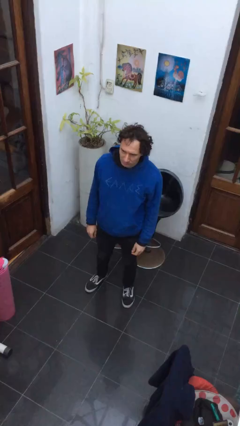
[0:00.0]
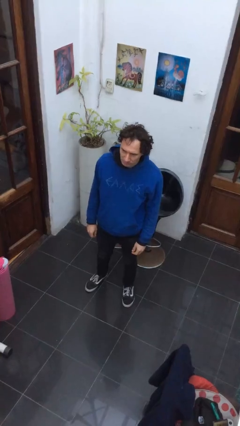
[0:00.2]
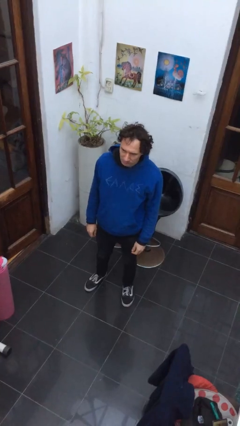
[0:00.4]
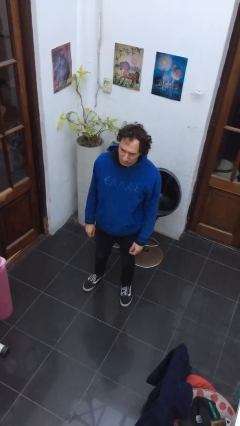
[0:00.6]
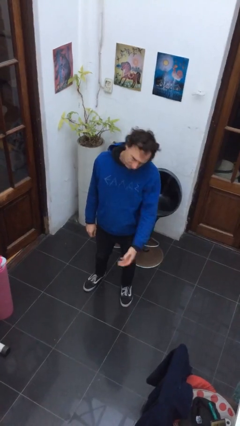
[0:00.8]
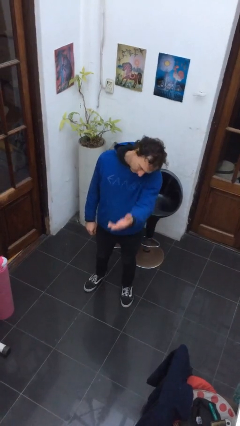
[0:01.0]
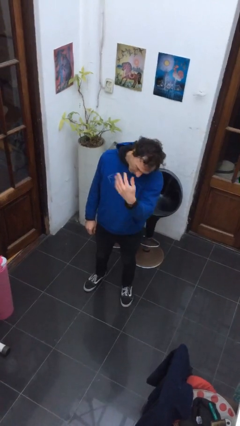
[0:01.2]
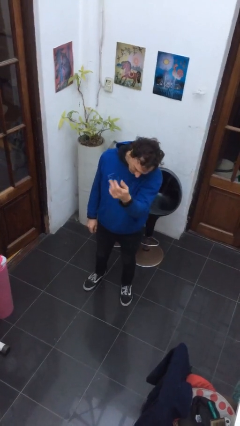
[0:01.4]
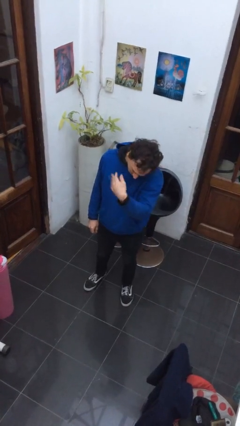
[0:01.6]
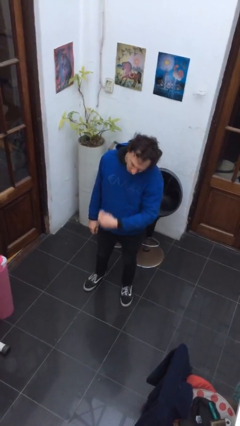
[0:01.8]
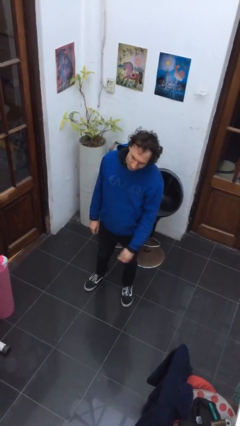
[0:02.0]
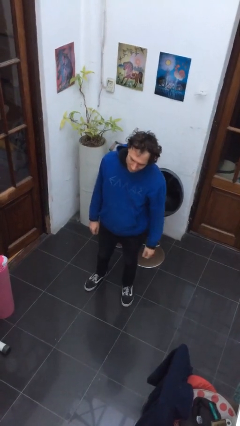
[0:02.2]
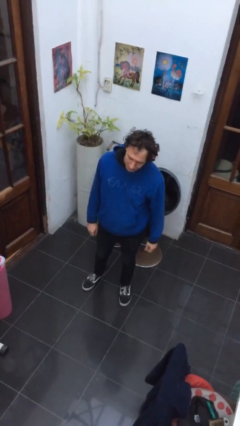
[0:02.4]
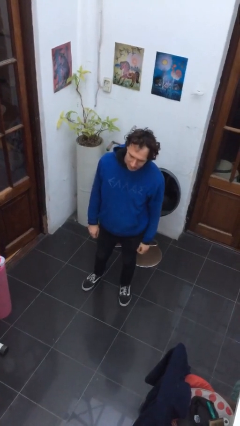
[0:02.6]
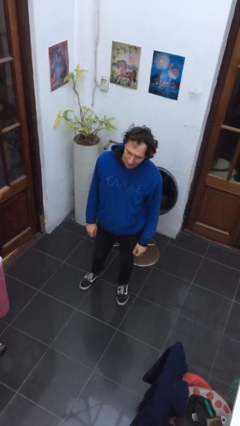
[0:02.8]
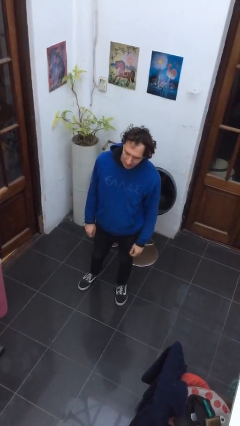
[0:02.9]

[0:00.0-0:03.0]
person gestures come here

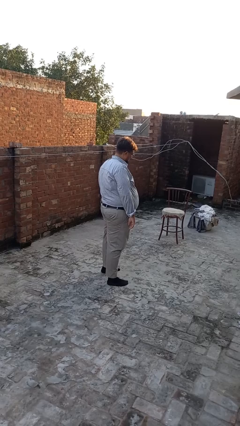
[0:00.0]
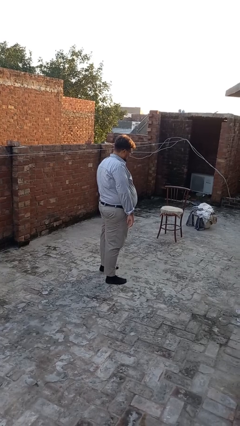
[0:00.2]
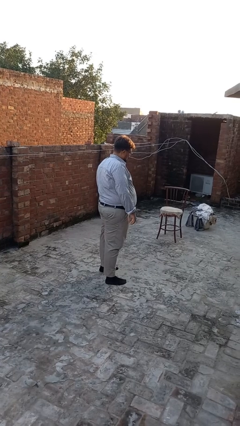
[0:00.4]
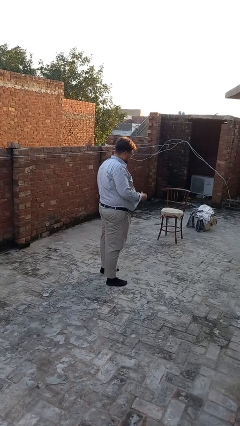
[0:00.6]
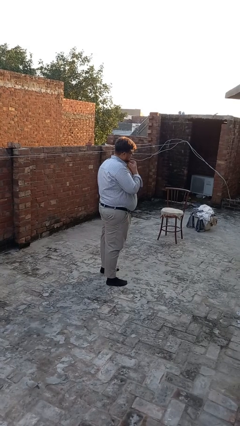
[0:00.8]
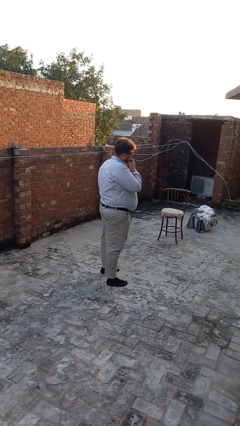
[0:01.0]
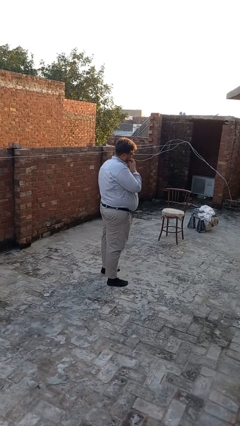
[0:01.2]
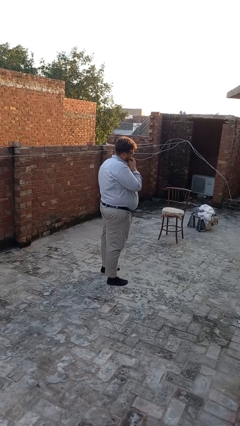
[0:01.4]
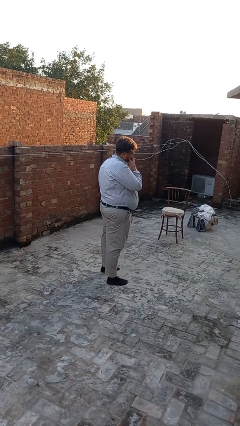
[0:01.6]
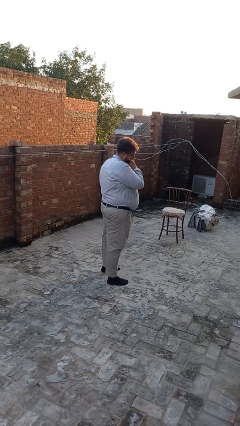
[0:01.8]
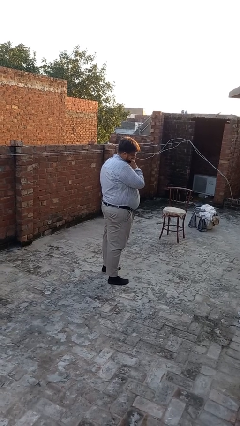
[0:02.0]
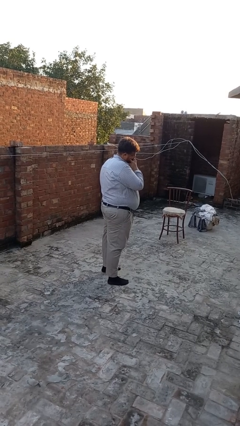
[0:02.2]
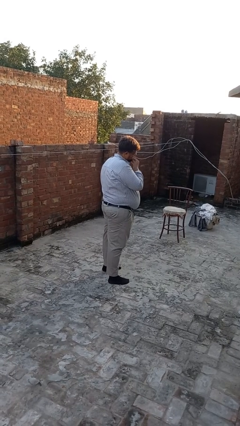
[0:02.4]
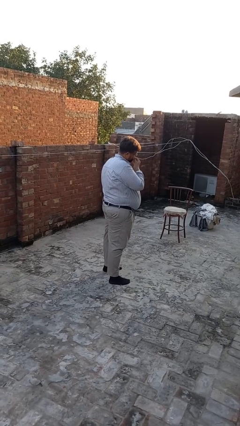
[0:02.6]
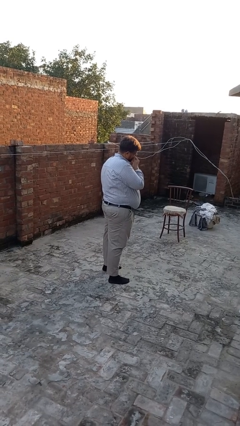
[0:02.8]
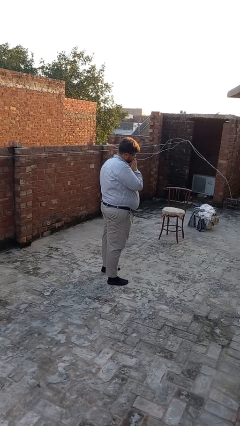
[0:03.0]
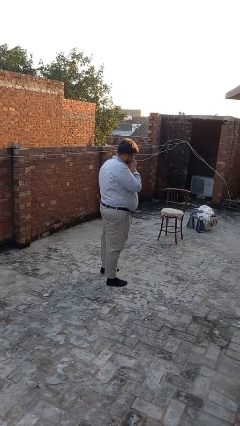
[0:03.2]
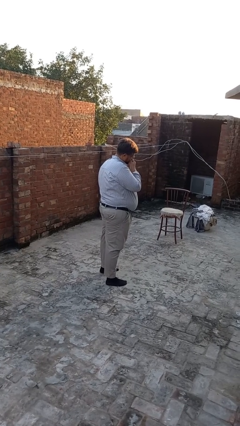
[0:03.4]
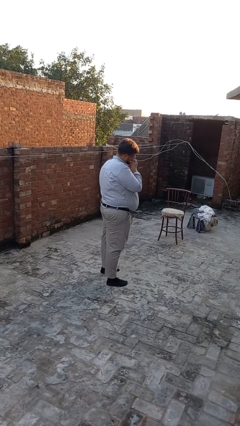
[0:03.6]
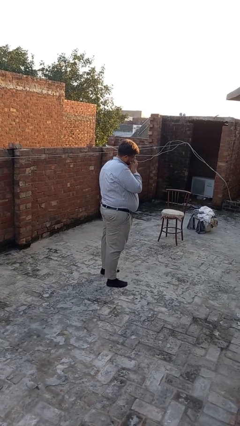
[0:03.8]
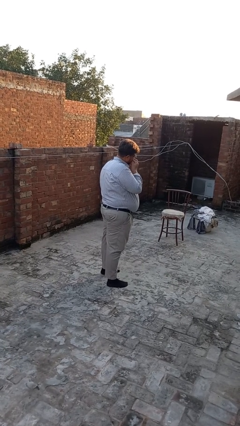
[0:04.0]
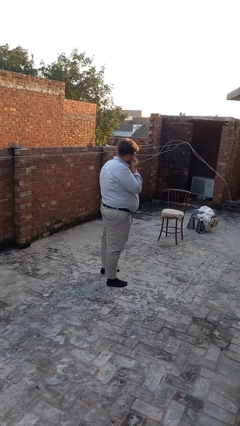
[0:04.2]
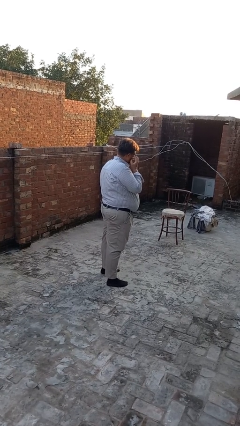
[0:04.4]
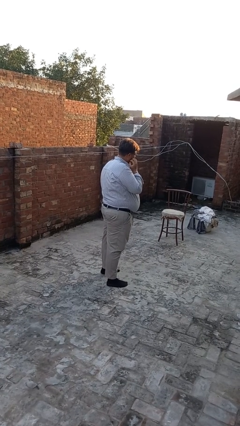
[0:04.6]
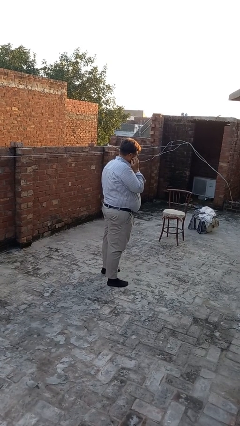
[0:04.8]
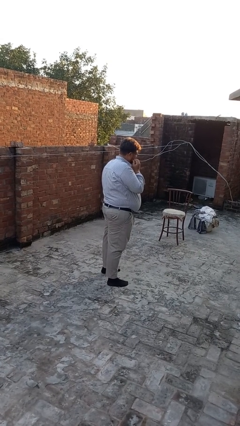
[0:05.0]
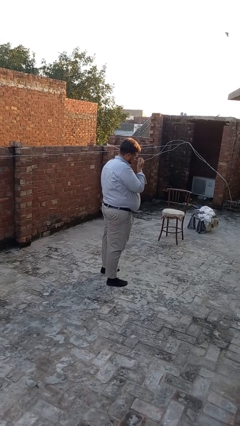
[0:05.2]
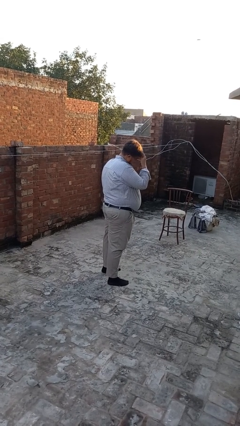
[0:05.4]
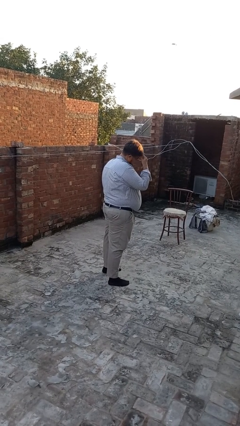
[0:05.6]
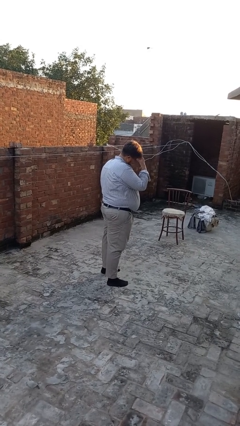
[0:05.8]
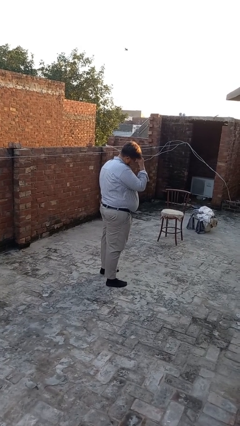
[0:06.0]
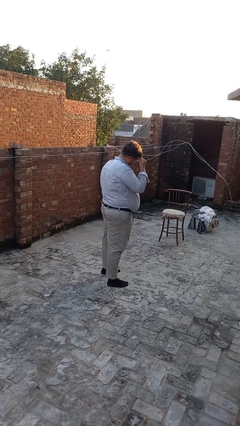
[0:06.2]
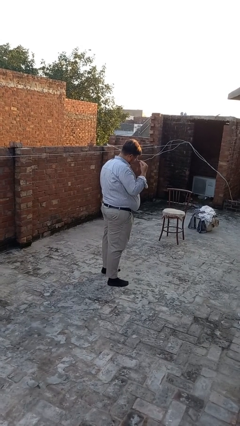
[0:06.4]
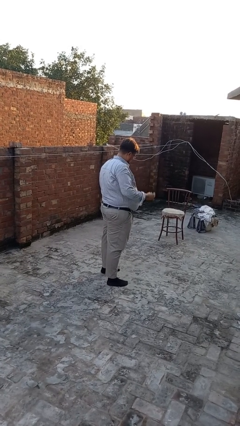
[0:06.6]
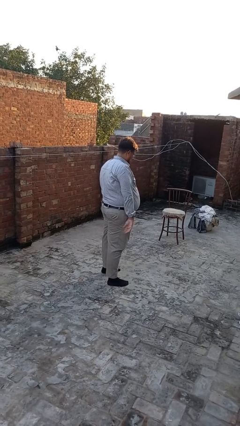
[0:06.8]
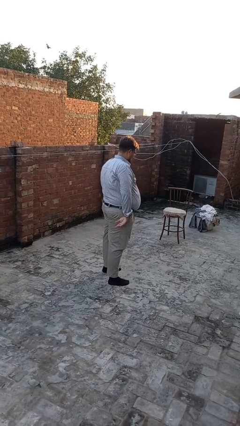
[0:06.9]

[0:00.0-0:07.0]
person scratches face

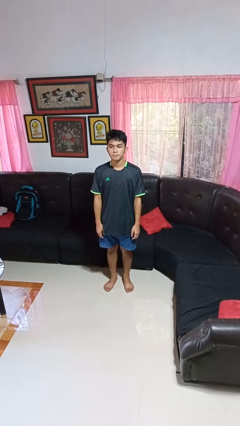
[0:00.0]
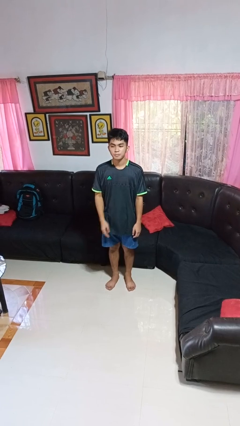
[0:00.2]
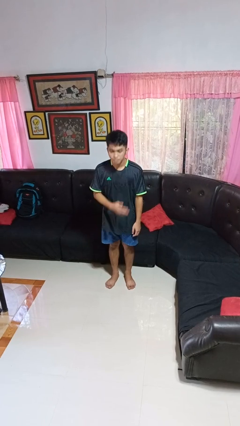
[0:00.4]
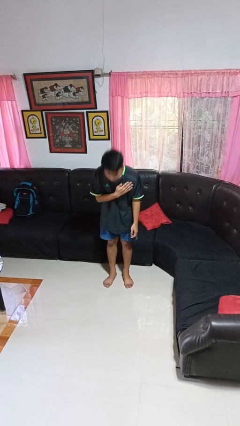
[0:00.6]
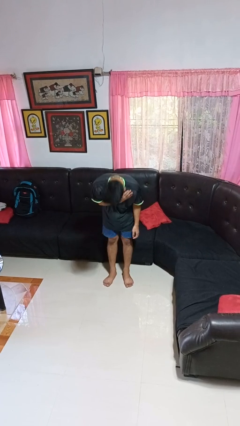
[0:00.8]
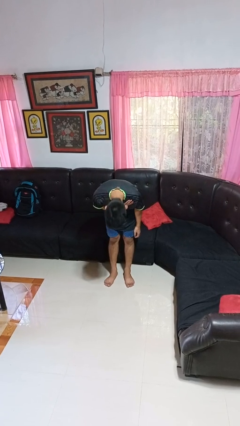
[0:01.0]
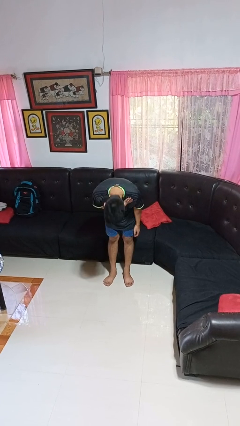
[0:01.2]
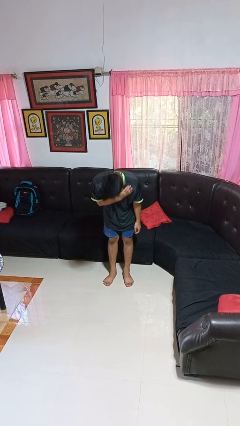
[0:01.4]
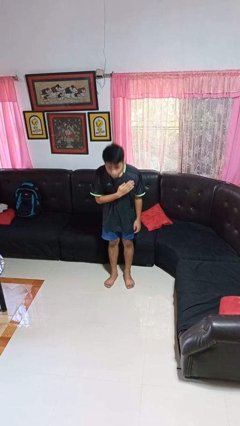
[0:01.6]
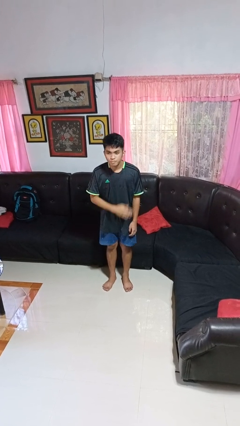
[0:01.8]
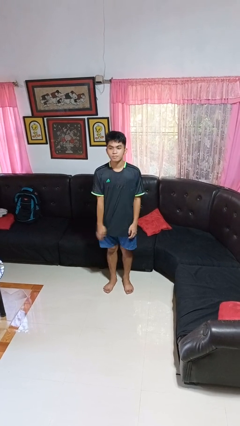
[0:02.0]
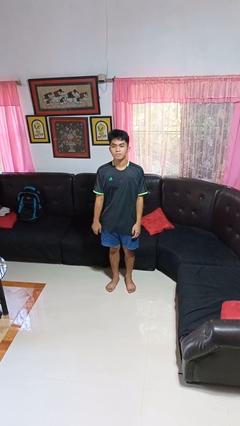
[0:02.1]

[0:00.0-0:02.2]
person bows

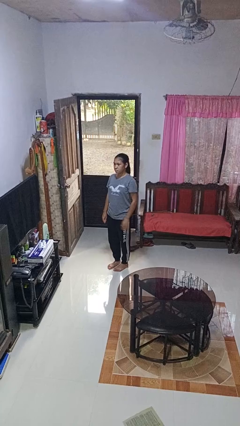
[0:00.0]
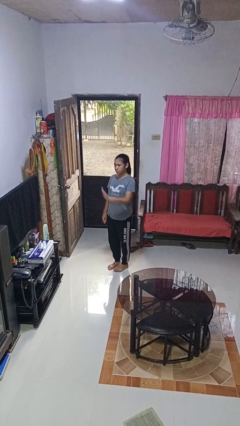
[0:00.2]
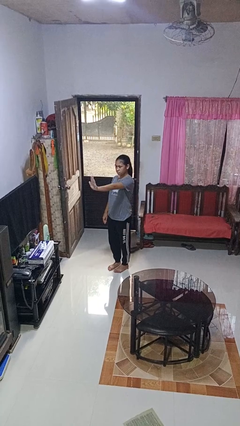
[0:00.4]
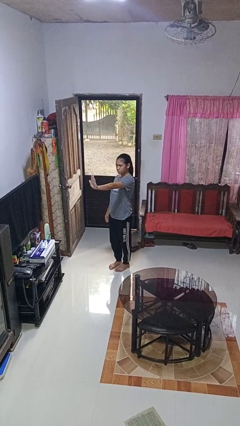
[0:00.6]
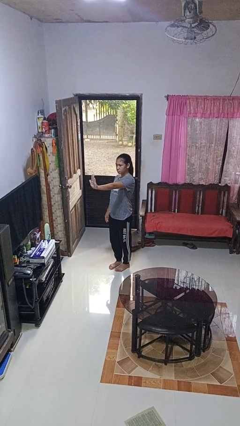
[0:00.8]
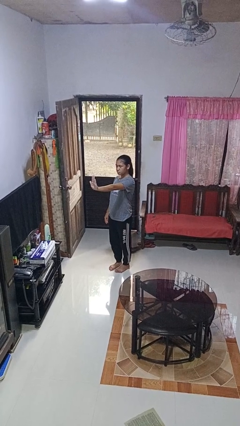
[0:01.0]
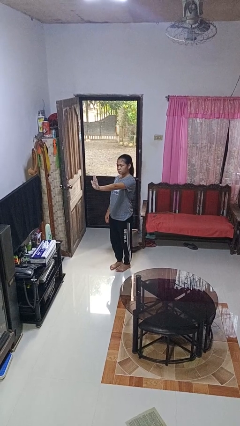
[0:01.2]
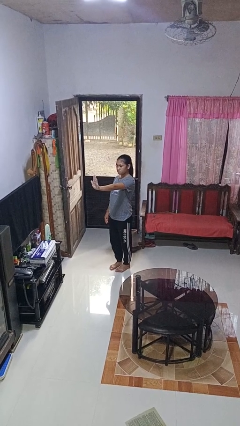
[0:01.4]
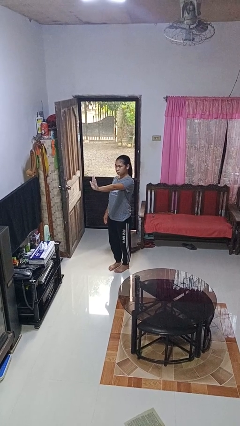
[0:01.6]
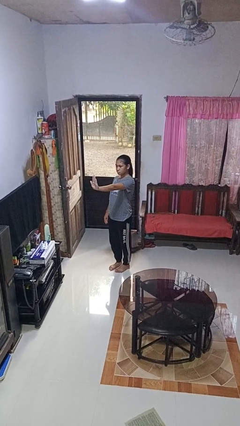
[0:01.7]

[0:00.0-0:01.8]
person gestures stop

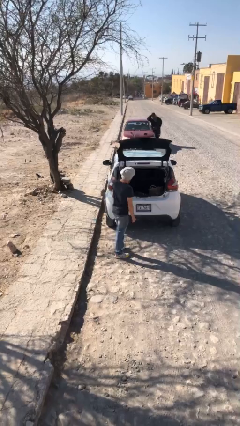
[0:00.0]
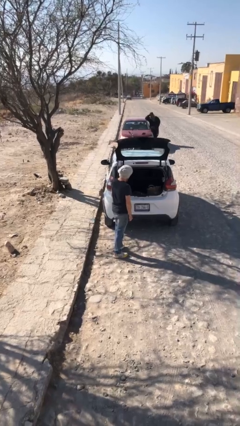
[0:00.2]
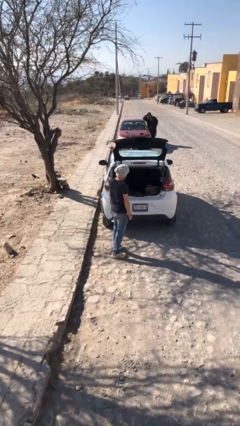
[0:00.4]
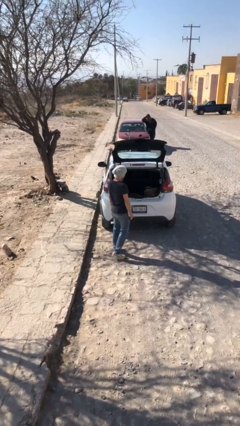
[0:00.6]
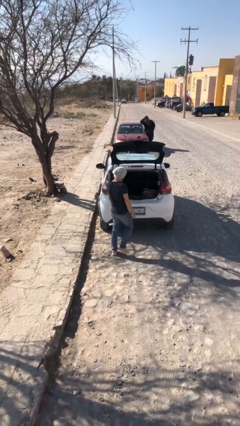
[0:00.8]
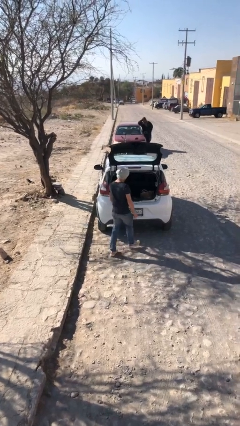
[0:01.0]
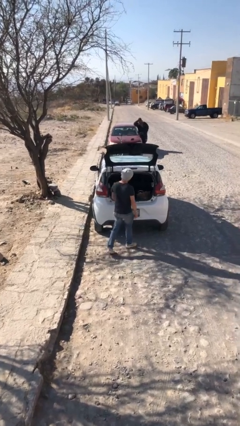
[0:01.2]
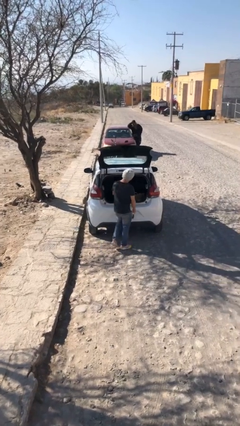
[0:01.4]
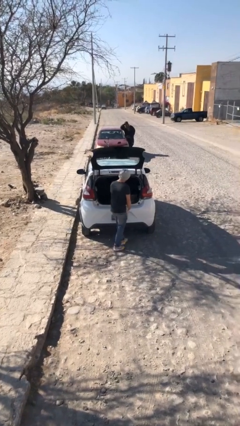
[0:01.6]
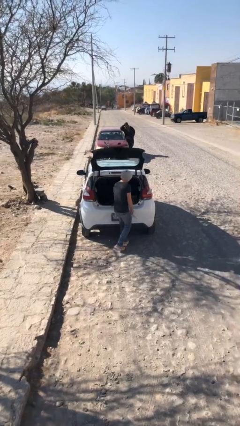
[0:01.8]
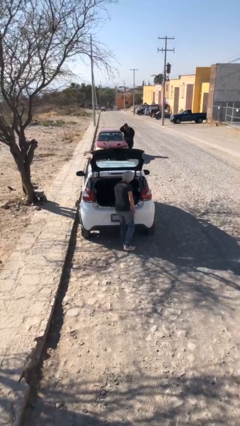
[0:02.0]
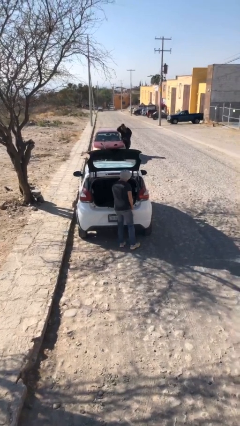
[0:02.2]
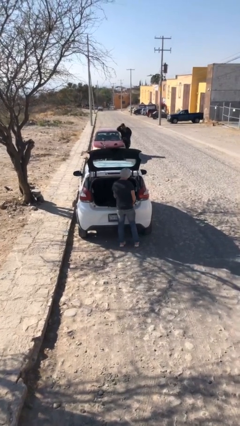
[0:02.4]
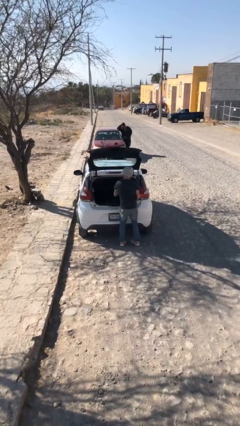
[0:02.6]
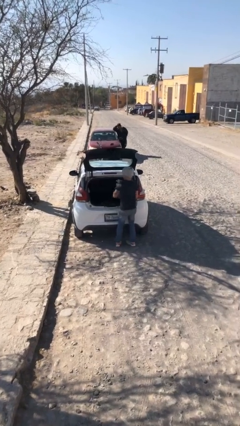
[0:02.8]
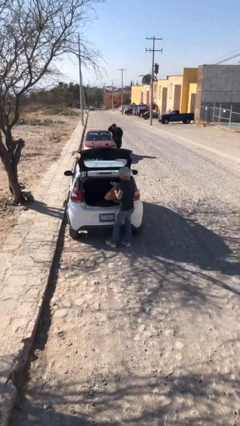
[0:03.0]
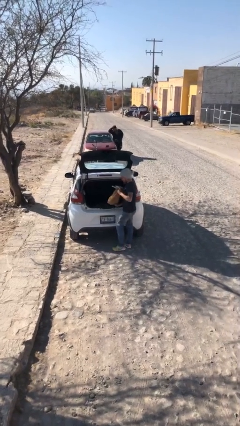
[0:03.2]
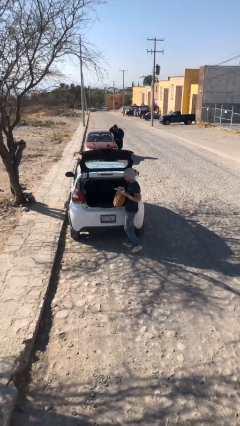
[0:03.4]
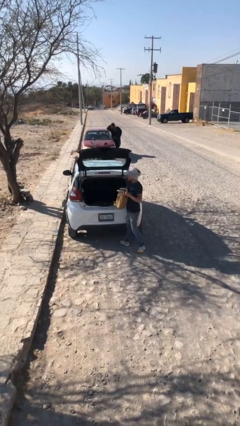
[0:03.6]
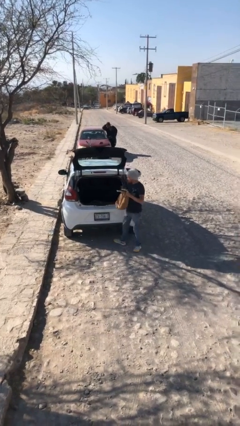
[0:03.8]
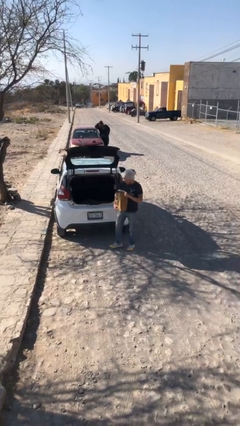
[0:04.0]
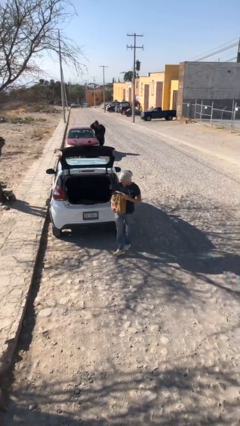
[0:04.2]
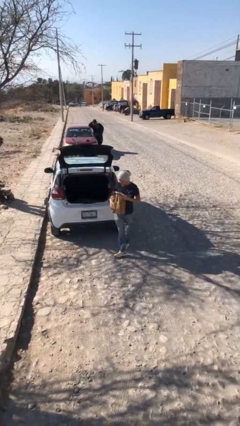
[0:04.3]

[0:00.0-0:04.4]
person unloads car
